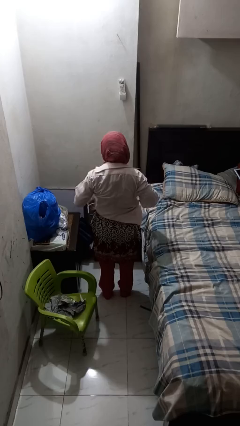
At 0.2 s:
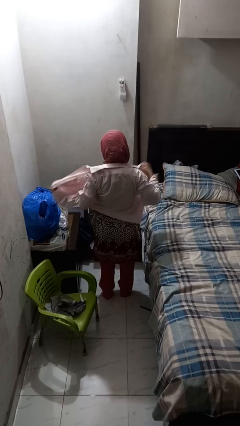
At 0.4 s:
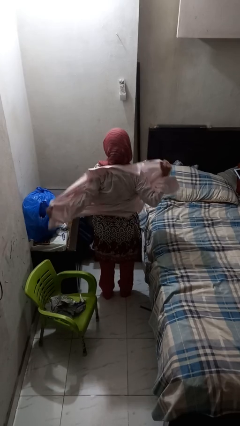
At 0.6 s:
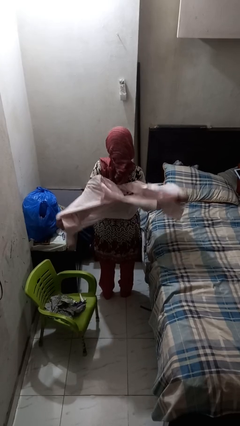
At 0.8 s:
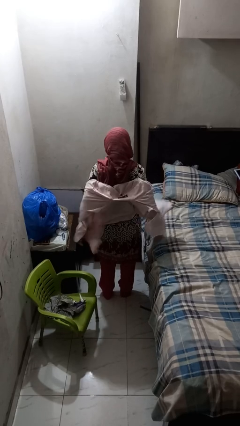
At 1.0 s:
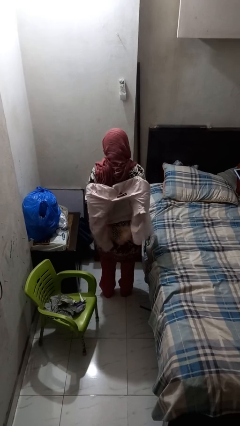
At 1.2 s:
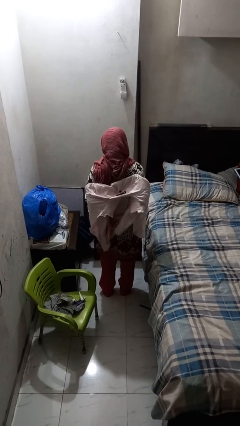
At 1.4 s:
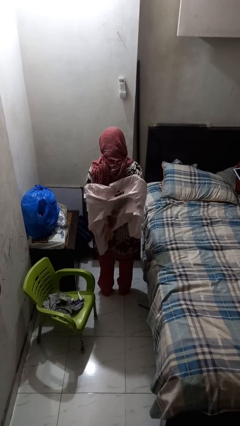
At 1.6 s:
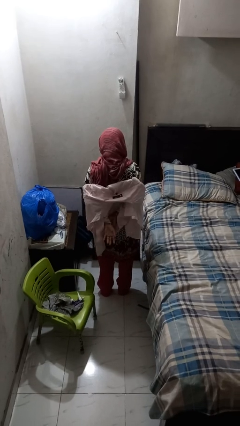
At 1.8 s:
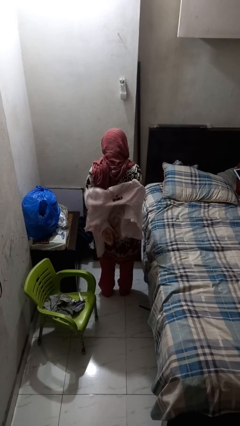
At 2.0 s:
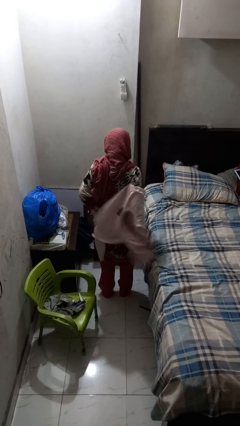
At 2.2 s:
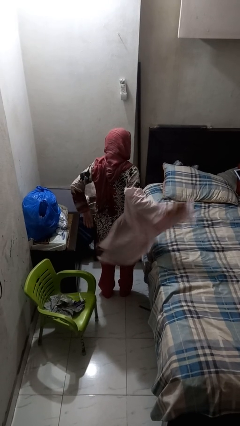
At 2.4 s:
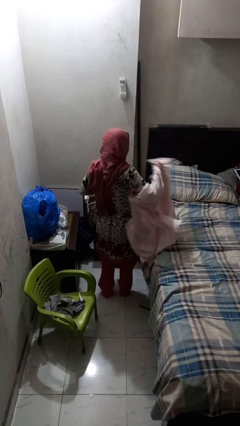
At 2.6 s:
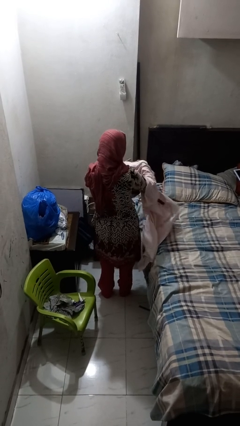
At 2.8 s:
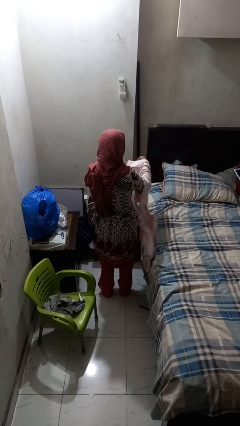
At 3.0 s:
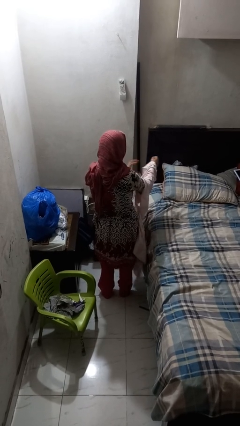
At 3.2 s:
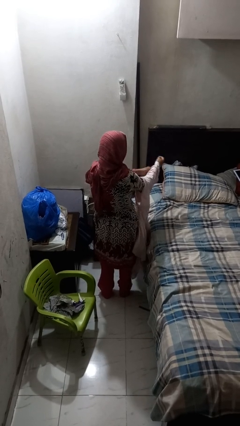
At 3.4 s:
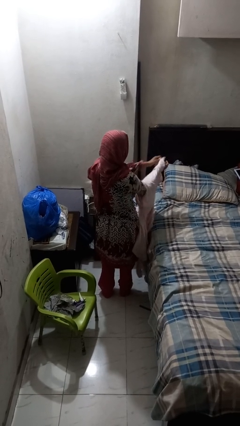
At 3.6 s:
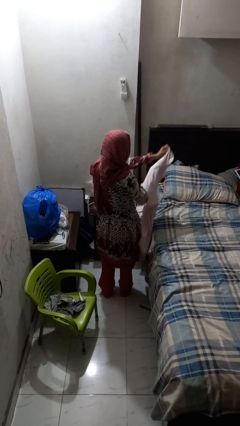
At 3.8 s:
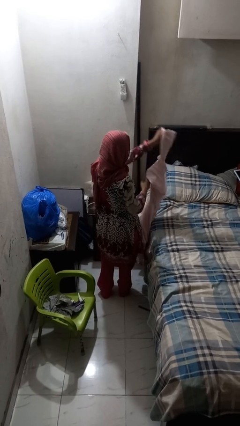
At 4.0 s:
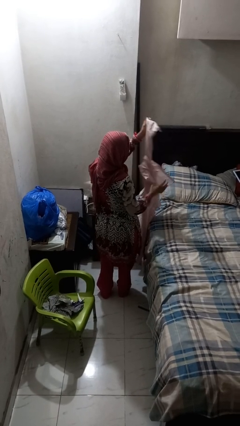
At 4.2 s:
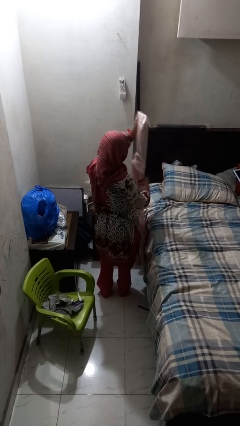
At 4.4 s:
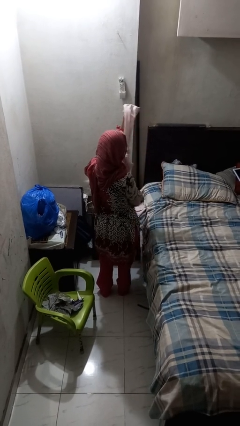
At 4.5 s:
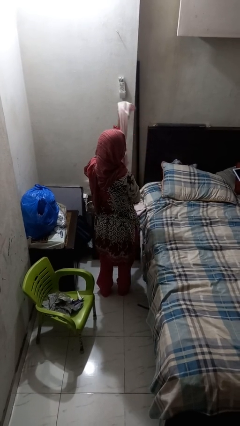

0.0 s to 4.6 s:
person takes off shirt

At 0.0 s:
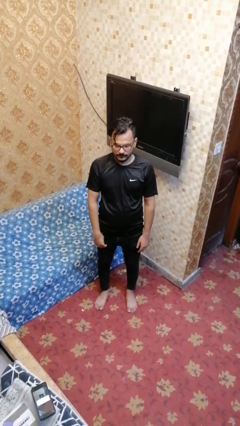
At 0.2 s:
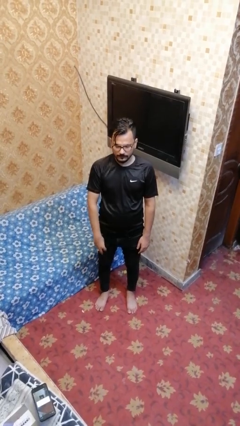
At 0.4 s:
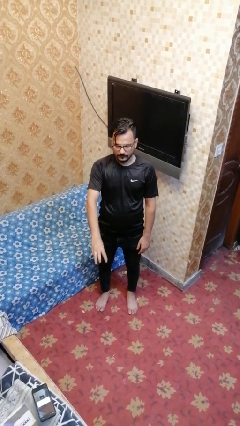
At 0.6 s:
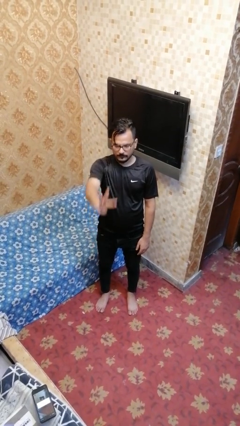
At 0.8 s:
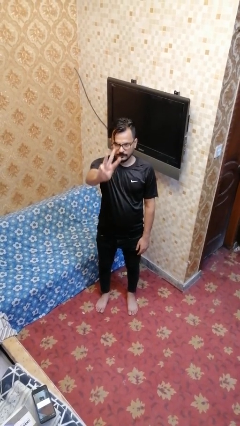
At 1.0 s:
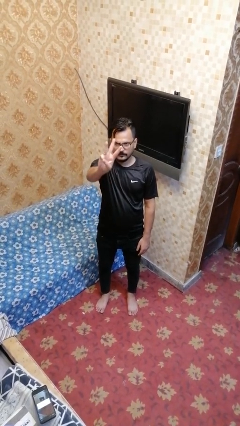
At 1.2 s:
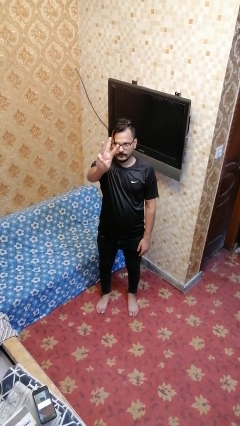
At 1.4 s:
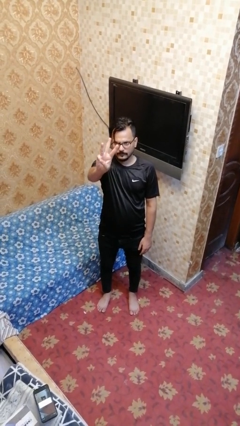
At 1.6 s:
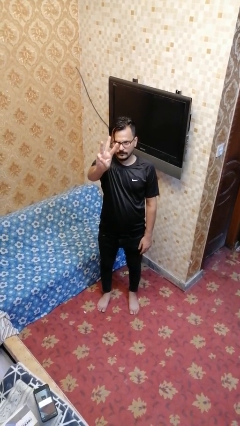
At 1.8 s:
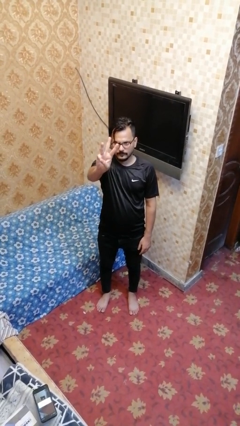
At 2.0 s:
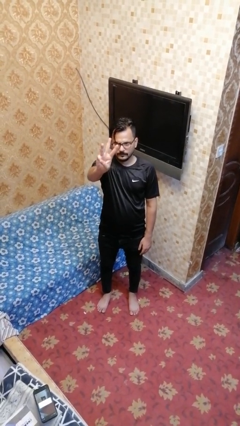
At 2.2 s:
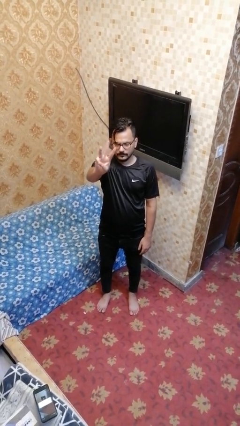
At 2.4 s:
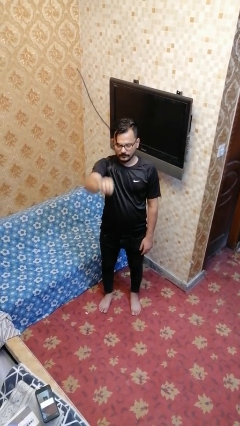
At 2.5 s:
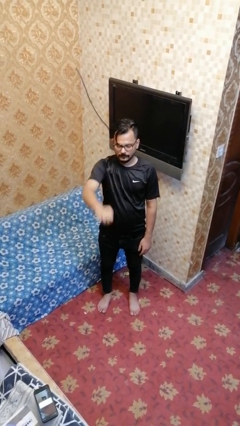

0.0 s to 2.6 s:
person gestures number three

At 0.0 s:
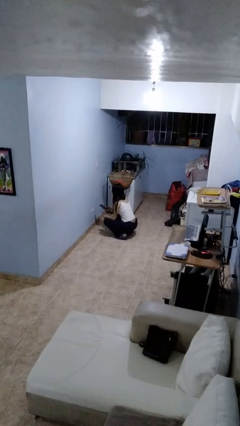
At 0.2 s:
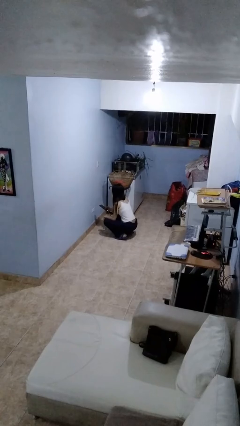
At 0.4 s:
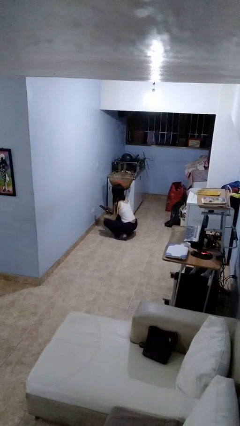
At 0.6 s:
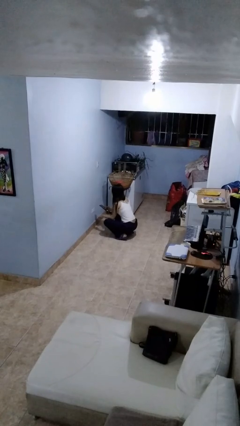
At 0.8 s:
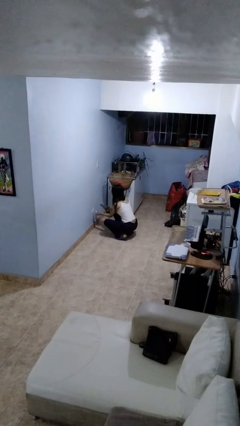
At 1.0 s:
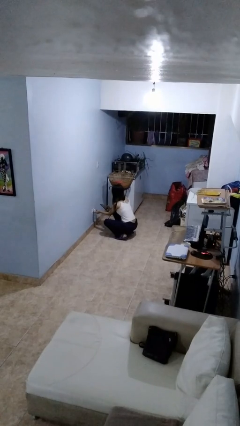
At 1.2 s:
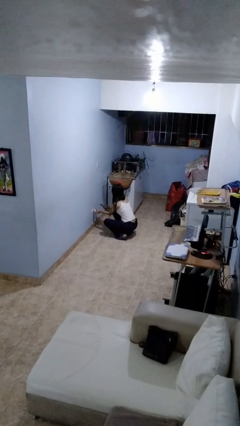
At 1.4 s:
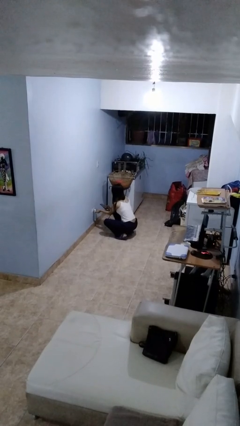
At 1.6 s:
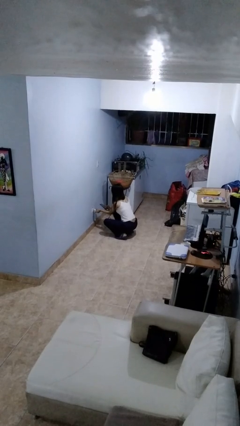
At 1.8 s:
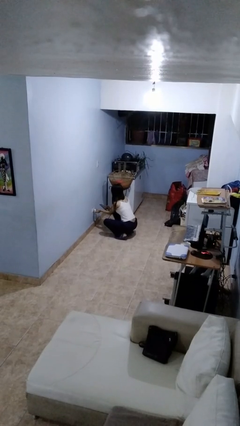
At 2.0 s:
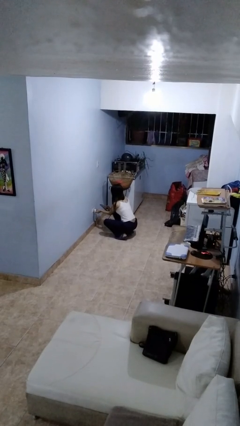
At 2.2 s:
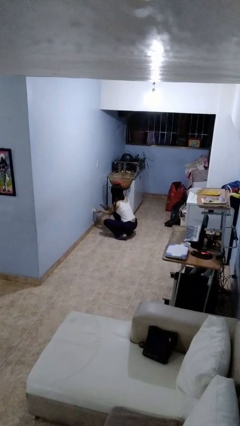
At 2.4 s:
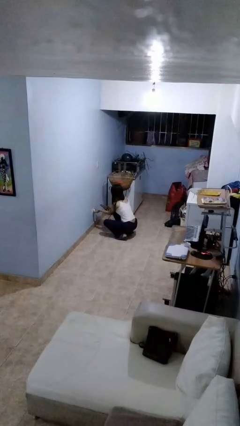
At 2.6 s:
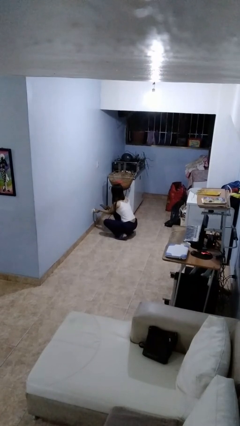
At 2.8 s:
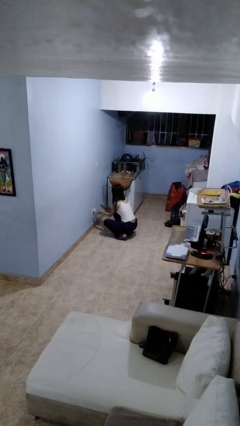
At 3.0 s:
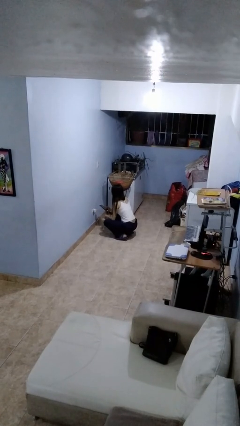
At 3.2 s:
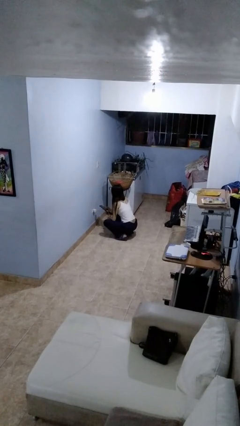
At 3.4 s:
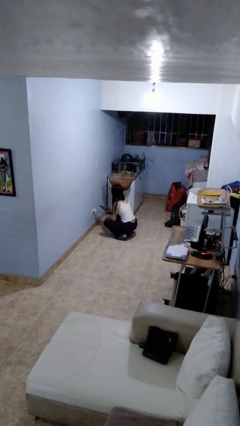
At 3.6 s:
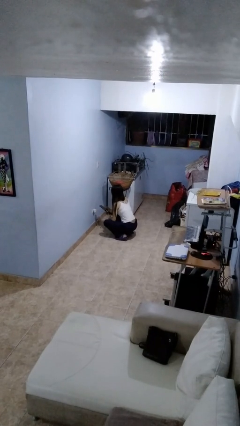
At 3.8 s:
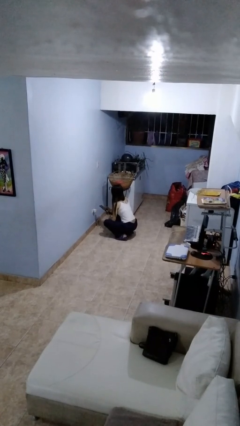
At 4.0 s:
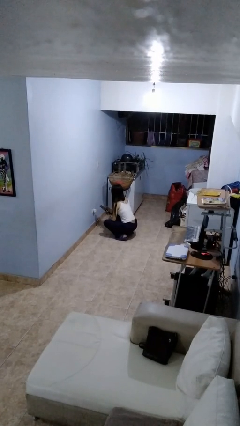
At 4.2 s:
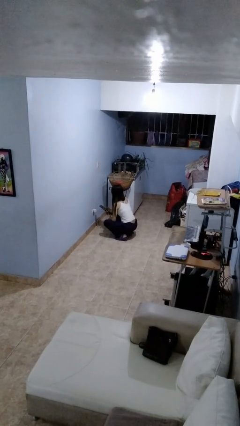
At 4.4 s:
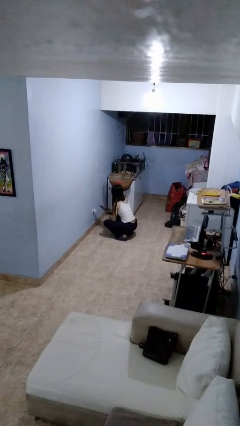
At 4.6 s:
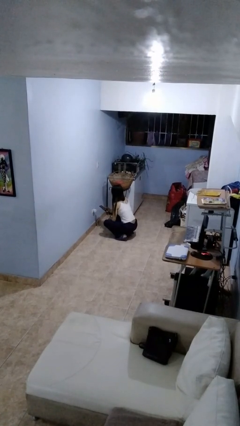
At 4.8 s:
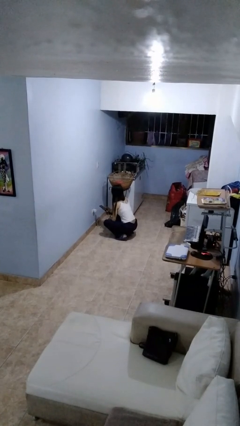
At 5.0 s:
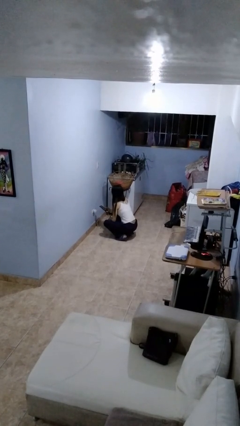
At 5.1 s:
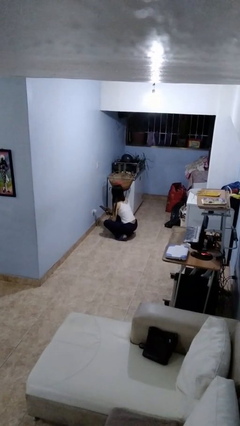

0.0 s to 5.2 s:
person plugs into electrical socket

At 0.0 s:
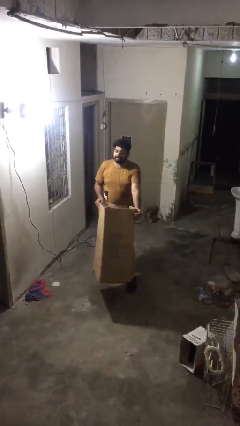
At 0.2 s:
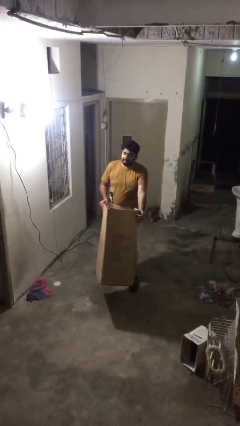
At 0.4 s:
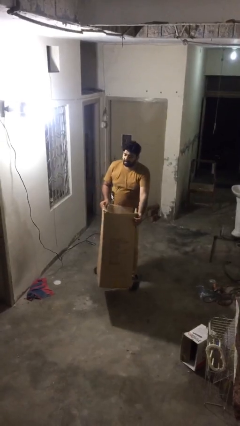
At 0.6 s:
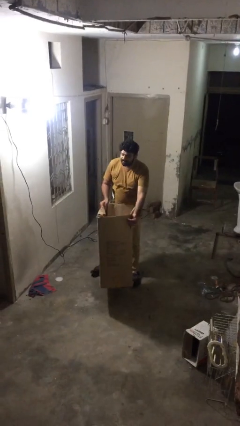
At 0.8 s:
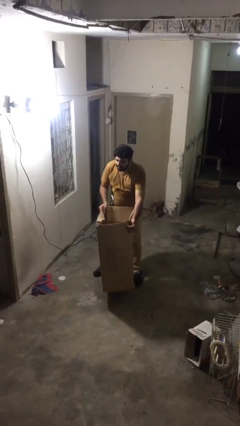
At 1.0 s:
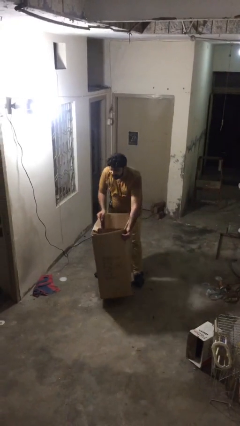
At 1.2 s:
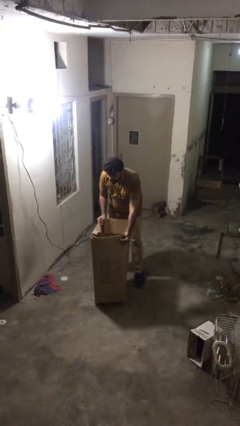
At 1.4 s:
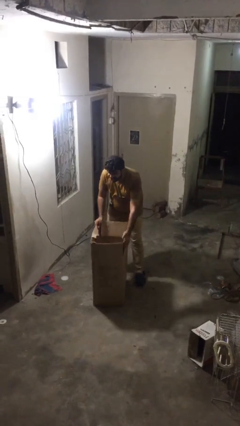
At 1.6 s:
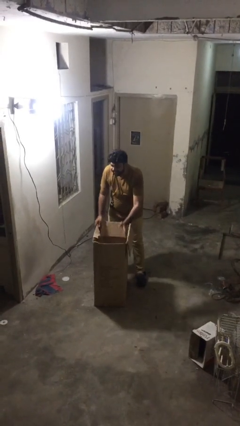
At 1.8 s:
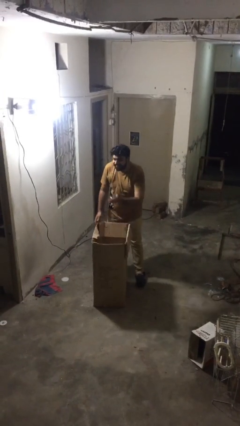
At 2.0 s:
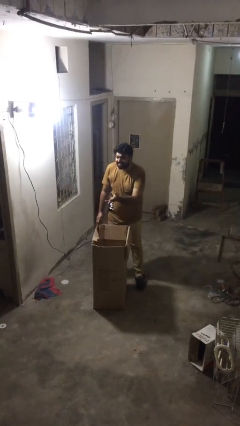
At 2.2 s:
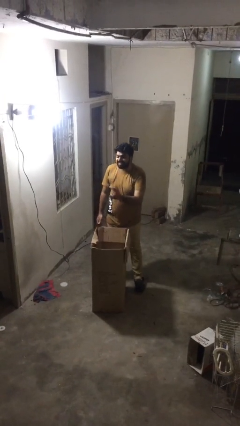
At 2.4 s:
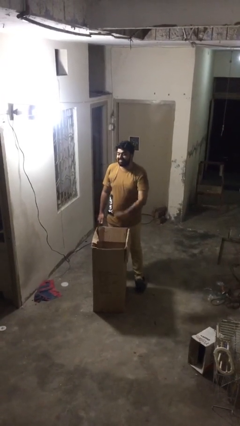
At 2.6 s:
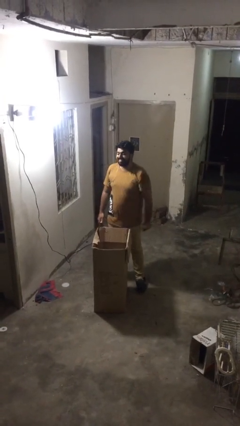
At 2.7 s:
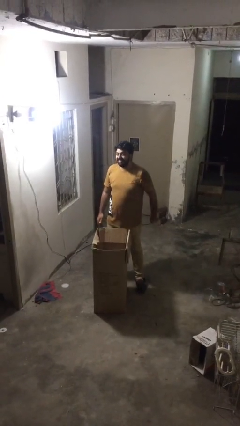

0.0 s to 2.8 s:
person puts down object on floor

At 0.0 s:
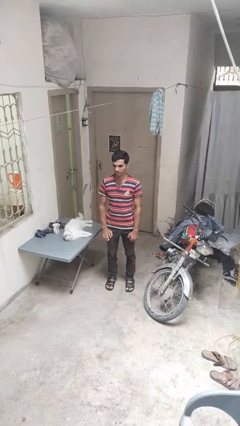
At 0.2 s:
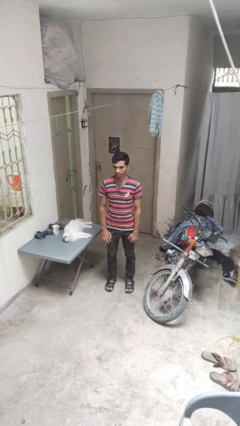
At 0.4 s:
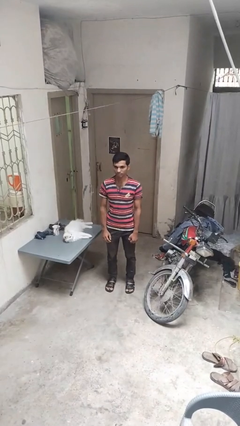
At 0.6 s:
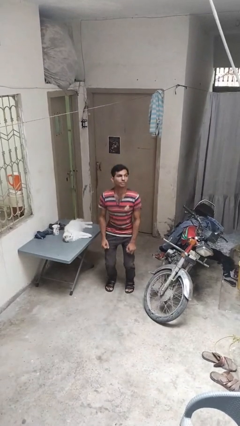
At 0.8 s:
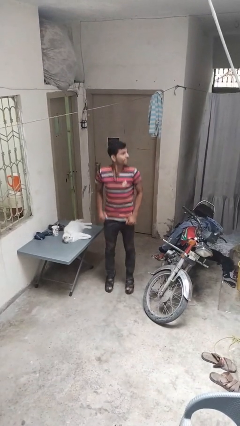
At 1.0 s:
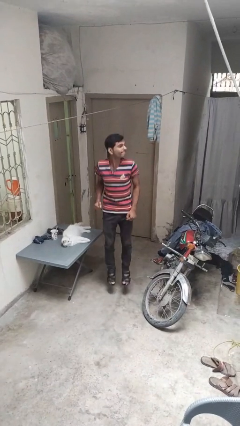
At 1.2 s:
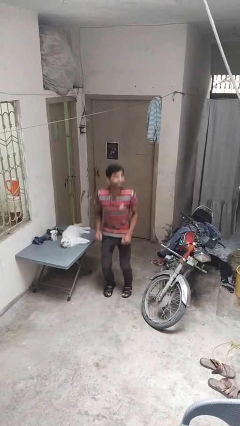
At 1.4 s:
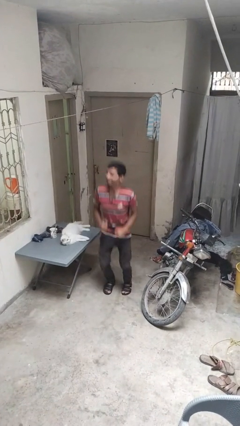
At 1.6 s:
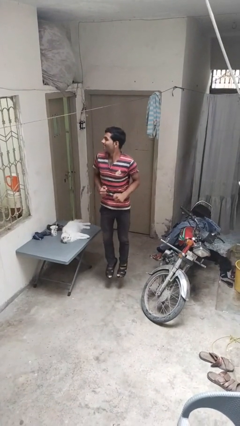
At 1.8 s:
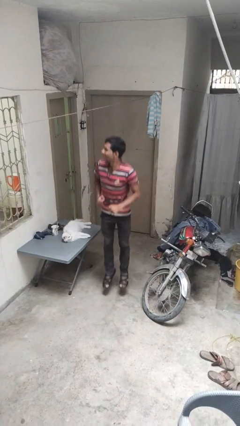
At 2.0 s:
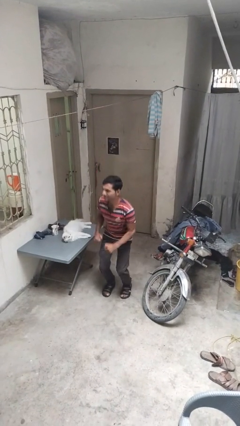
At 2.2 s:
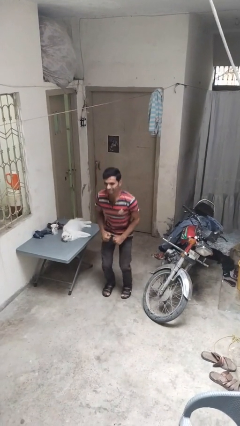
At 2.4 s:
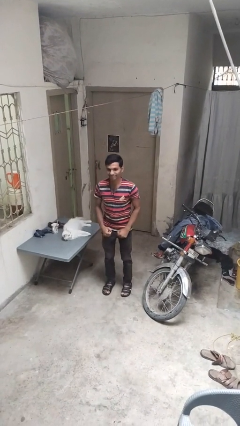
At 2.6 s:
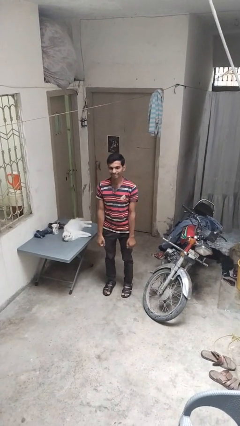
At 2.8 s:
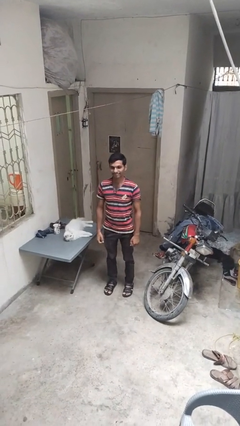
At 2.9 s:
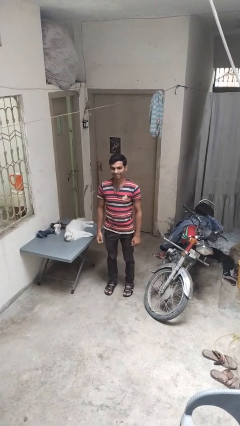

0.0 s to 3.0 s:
person jumps
